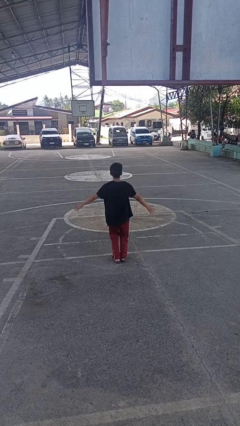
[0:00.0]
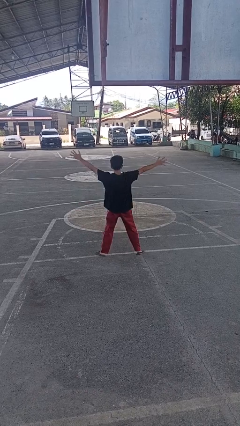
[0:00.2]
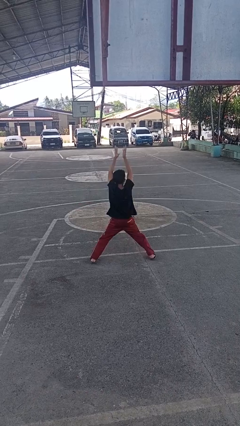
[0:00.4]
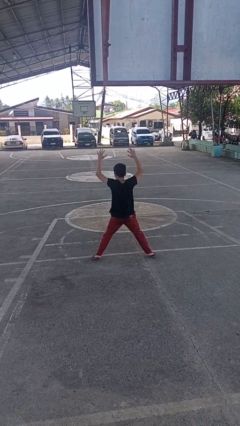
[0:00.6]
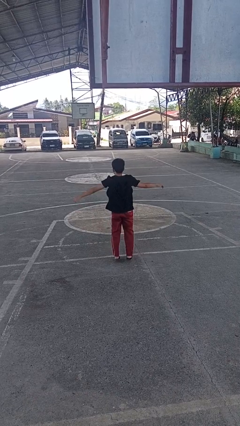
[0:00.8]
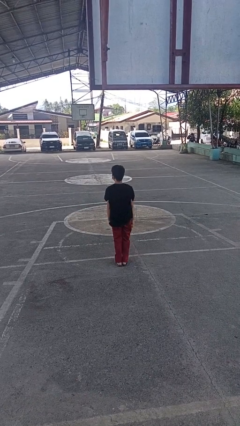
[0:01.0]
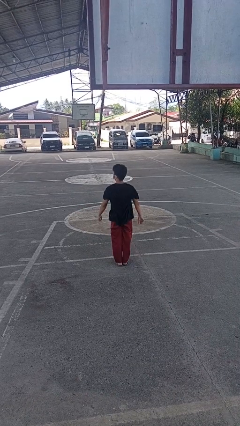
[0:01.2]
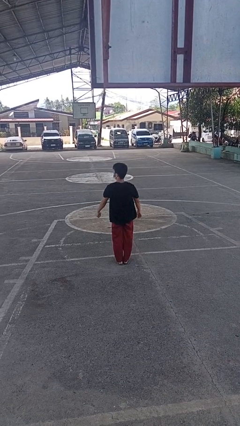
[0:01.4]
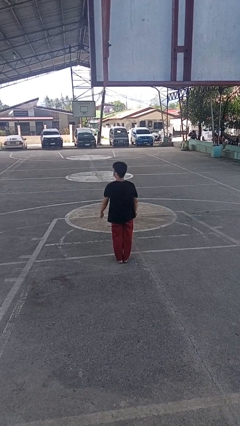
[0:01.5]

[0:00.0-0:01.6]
person exercises with jumping jacks

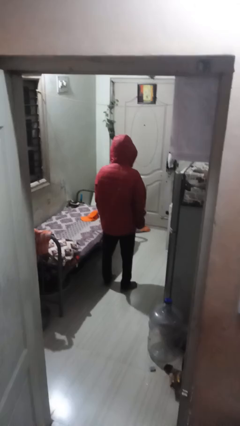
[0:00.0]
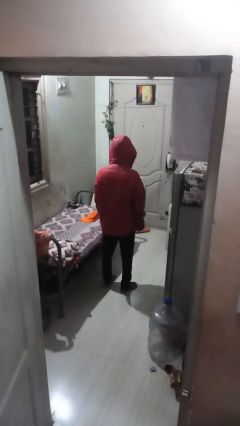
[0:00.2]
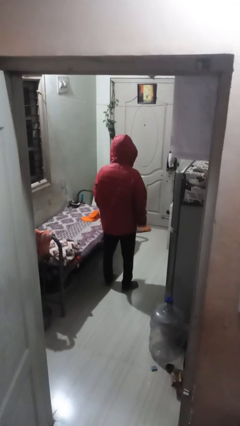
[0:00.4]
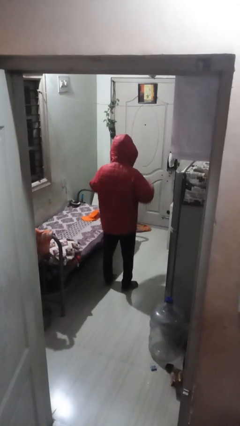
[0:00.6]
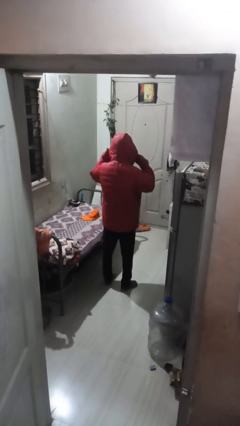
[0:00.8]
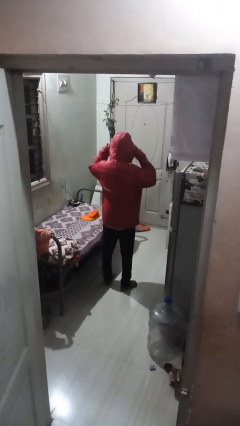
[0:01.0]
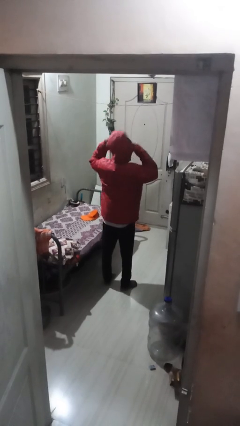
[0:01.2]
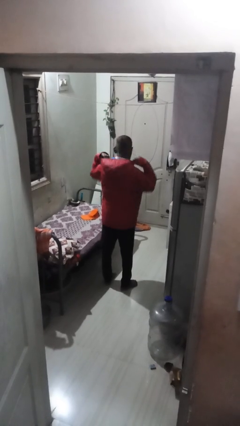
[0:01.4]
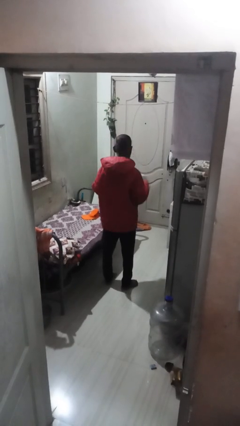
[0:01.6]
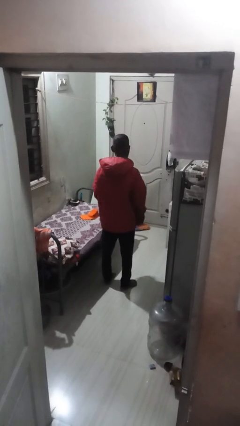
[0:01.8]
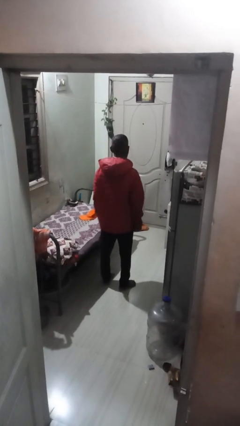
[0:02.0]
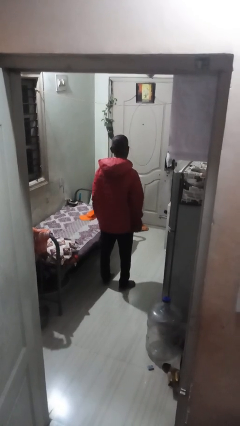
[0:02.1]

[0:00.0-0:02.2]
person takes off hoodie

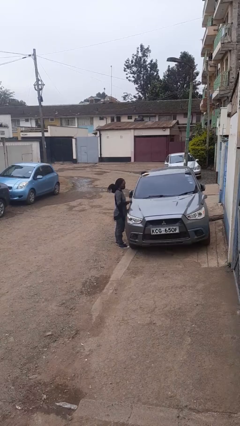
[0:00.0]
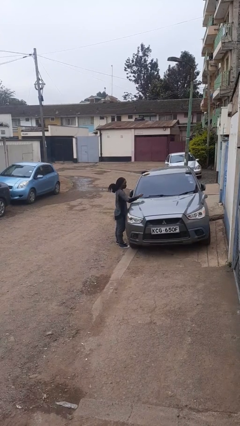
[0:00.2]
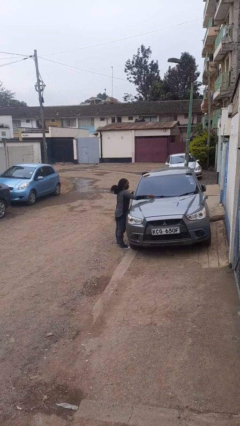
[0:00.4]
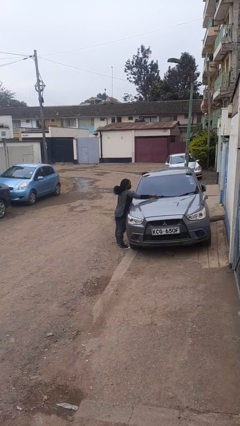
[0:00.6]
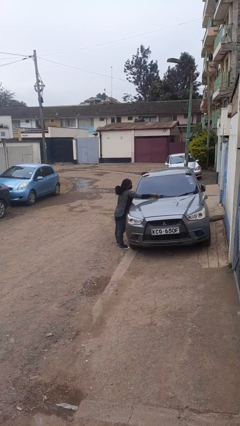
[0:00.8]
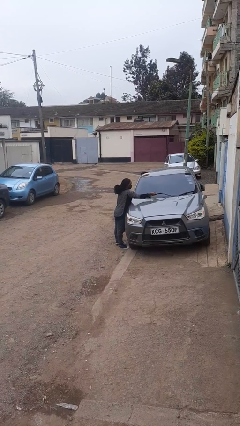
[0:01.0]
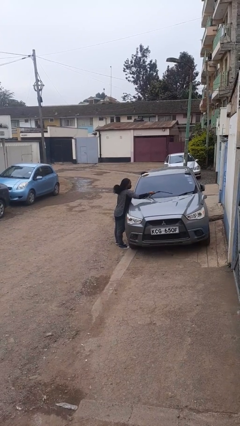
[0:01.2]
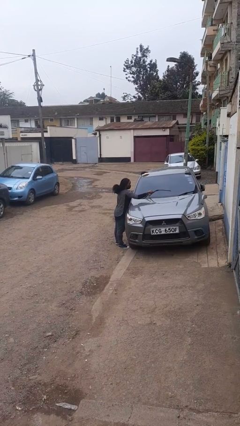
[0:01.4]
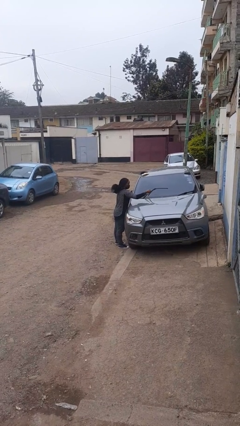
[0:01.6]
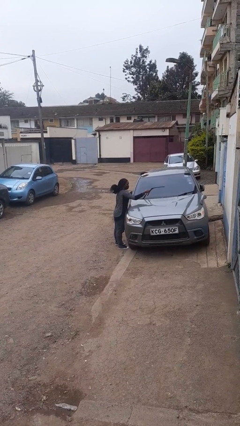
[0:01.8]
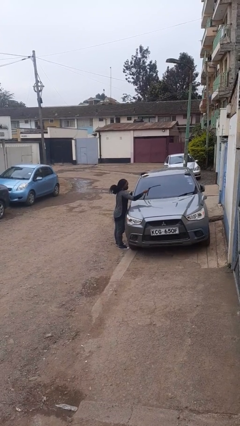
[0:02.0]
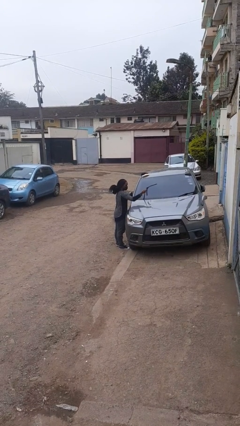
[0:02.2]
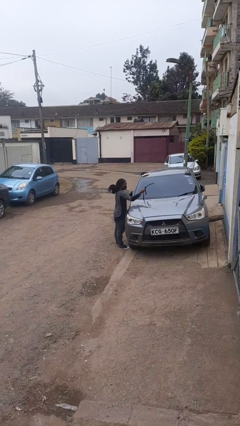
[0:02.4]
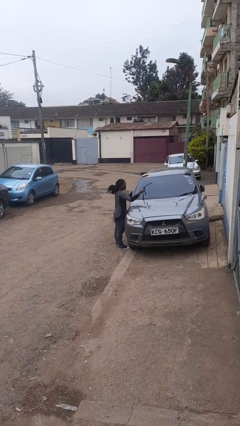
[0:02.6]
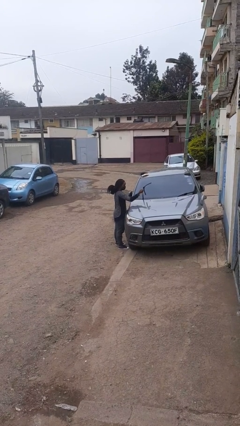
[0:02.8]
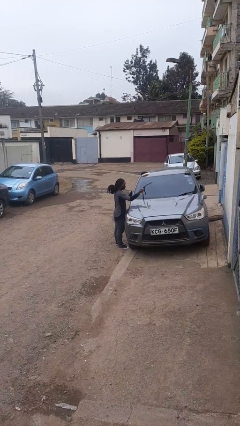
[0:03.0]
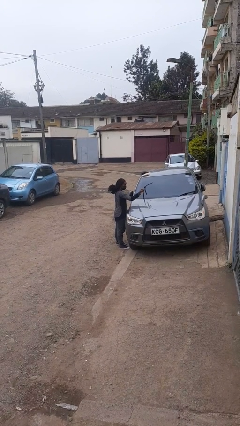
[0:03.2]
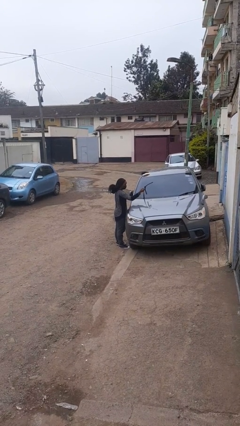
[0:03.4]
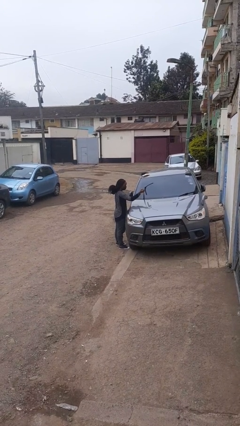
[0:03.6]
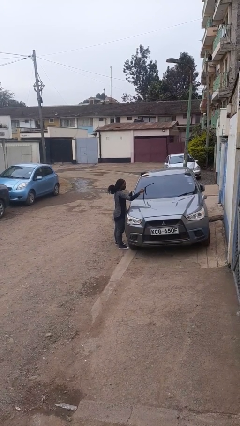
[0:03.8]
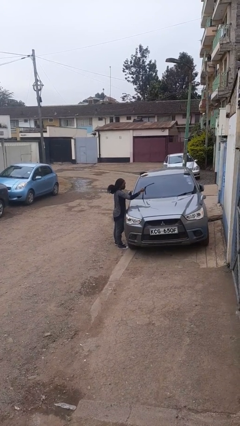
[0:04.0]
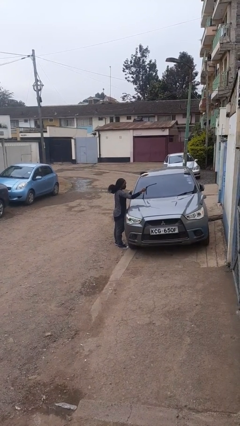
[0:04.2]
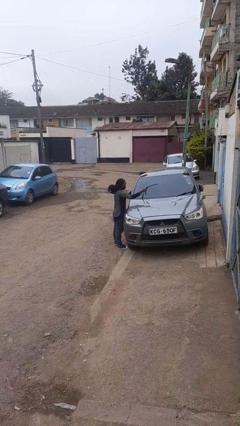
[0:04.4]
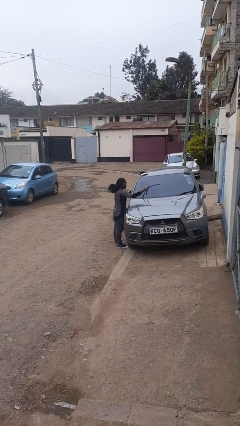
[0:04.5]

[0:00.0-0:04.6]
person flips up car wipers

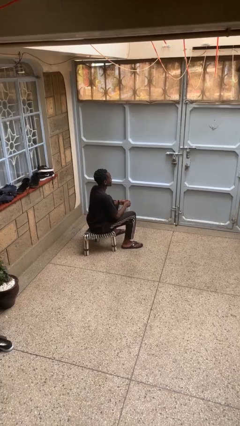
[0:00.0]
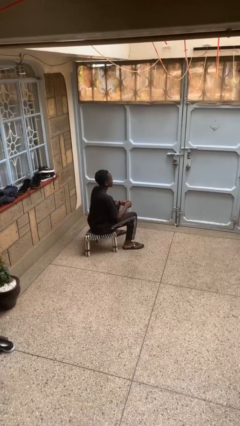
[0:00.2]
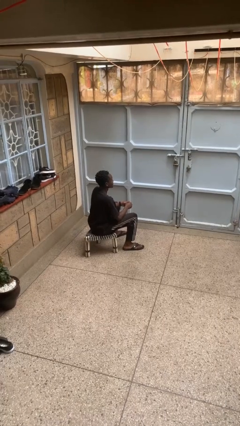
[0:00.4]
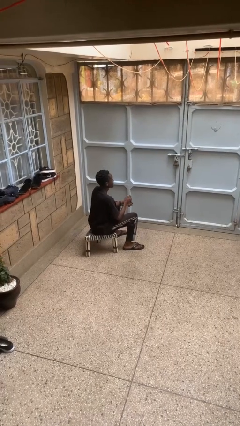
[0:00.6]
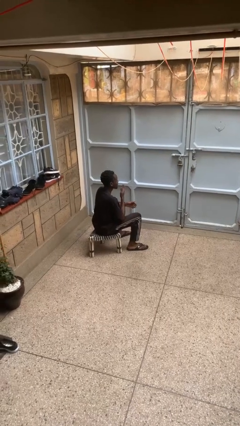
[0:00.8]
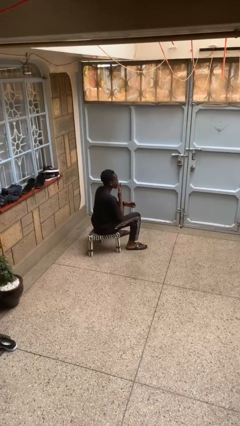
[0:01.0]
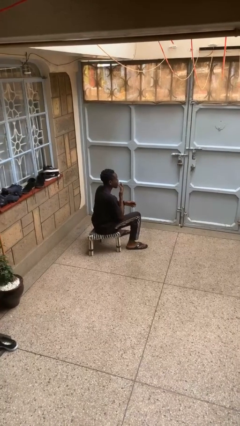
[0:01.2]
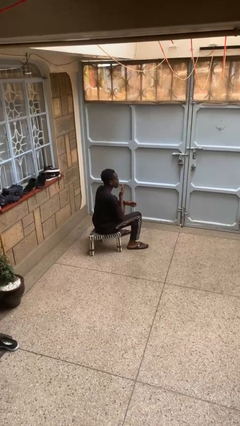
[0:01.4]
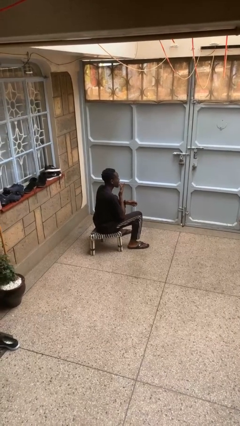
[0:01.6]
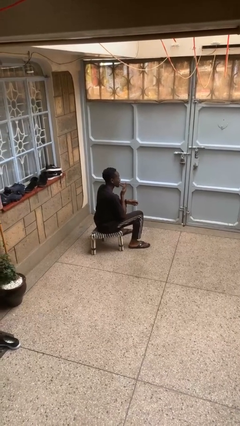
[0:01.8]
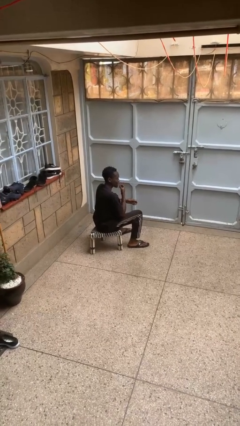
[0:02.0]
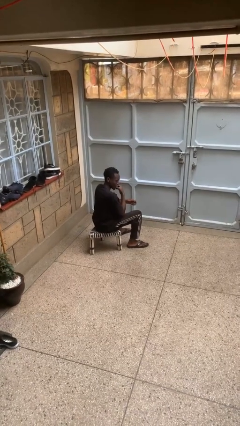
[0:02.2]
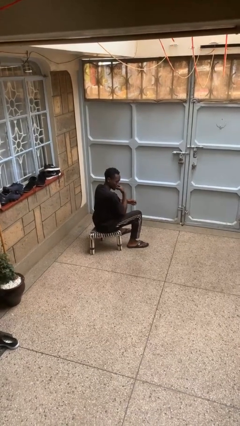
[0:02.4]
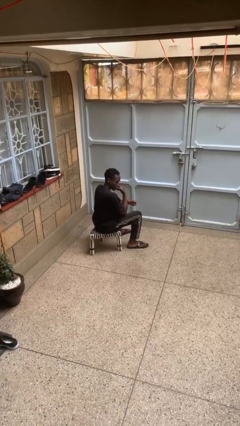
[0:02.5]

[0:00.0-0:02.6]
person licks fingers

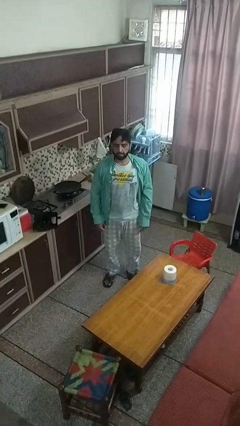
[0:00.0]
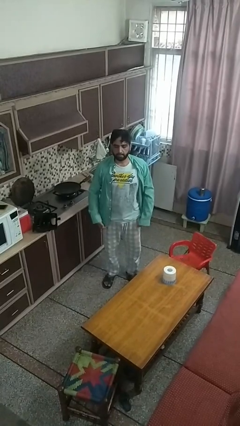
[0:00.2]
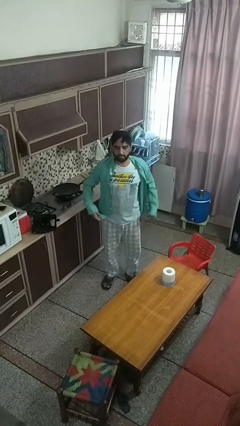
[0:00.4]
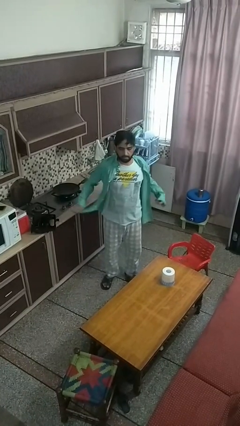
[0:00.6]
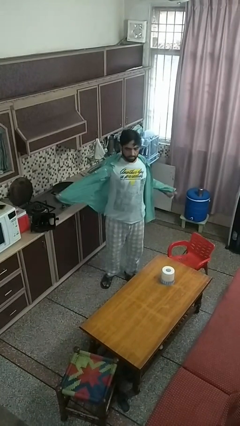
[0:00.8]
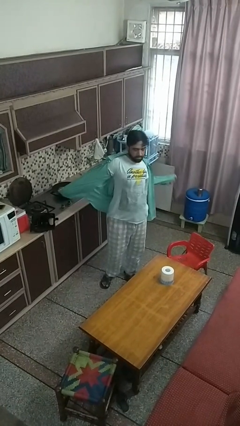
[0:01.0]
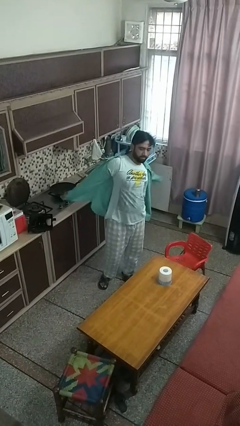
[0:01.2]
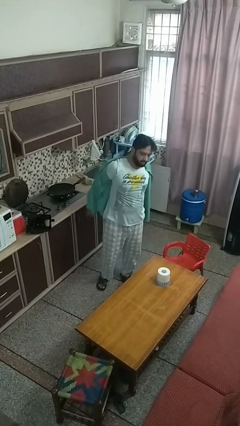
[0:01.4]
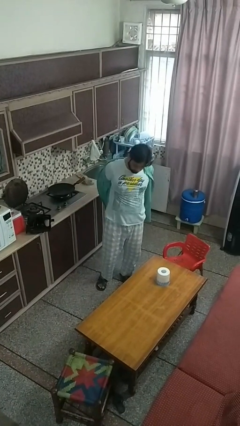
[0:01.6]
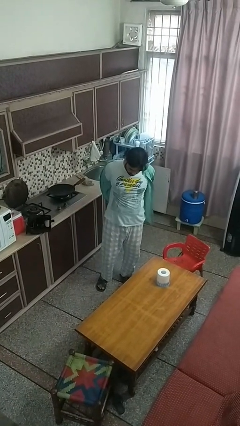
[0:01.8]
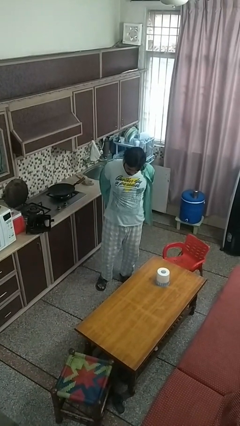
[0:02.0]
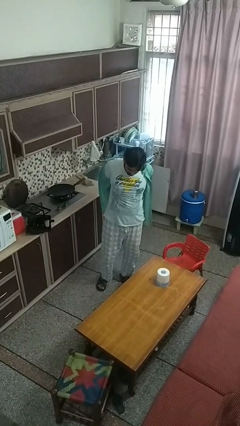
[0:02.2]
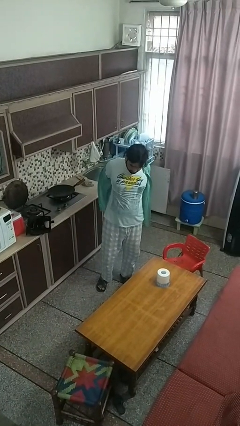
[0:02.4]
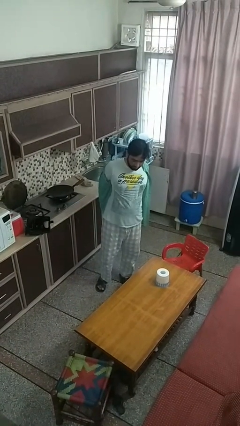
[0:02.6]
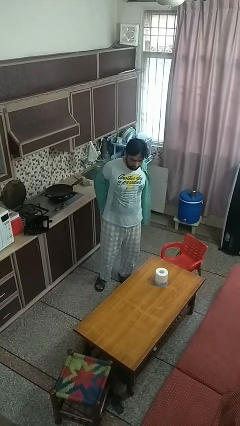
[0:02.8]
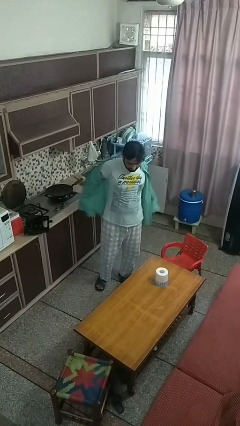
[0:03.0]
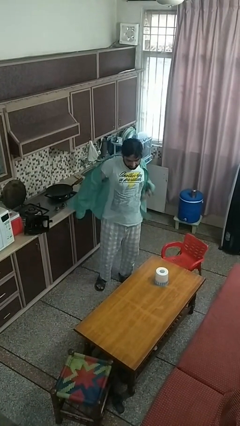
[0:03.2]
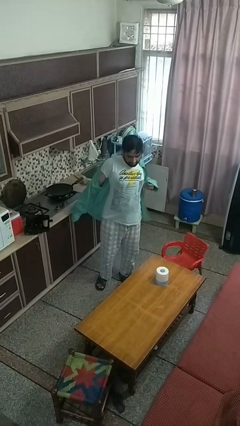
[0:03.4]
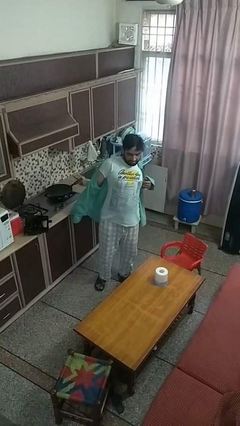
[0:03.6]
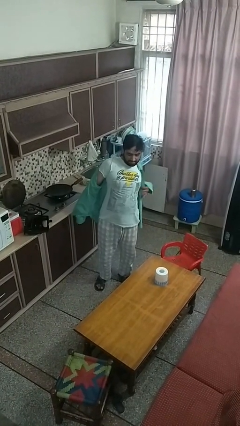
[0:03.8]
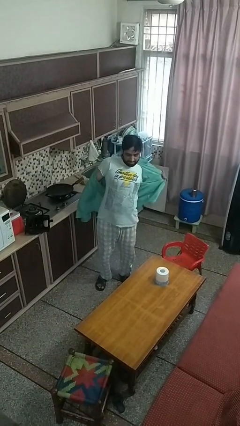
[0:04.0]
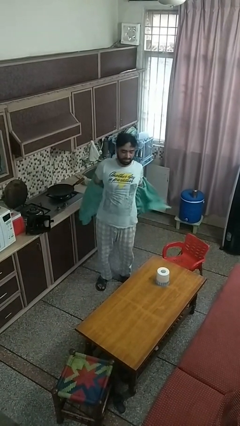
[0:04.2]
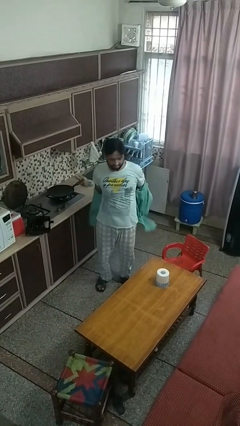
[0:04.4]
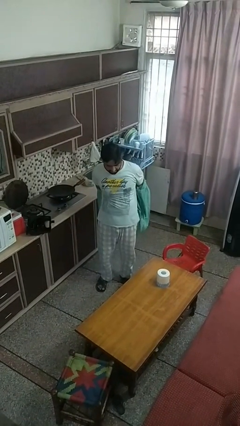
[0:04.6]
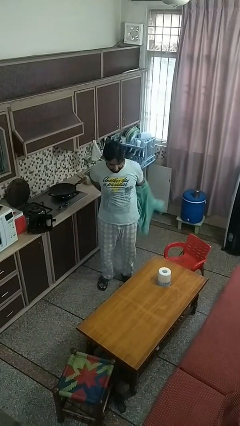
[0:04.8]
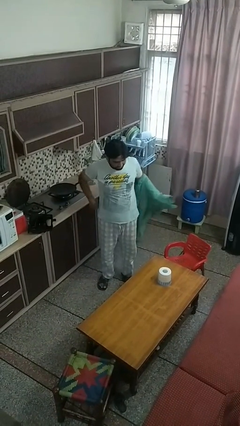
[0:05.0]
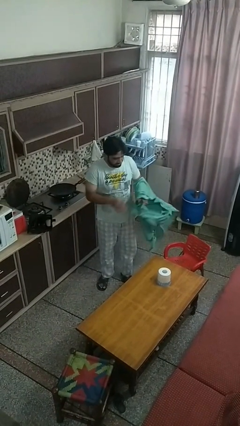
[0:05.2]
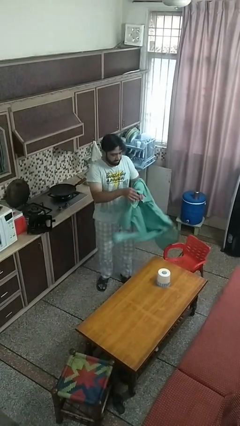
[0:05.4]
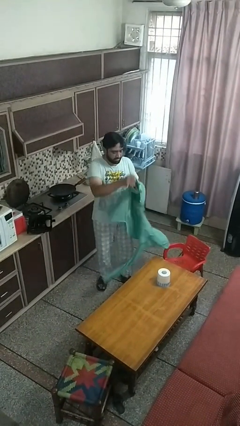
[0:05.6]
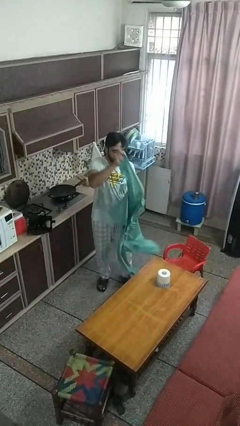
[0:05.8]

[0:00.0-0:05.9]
person takes off shirt

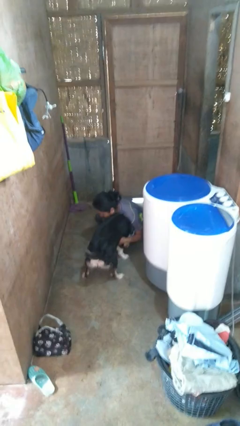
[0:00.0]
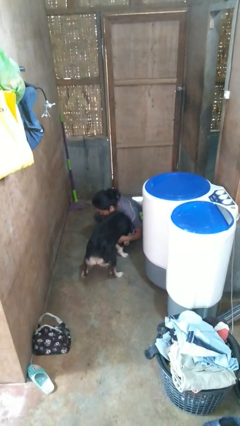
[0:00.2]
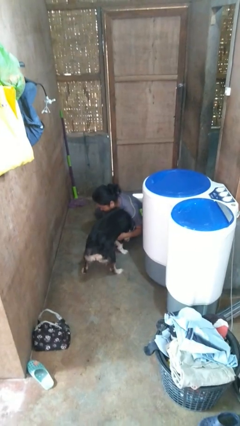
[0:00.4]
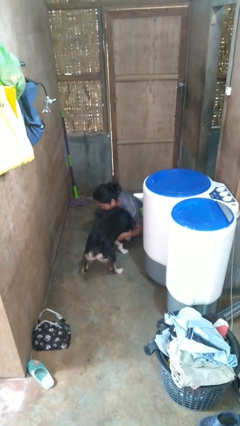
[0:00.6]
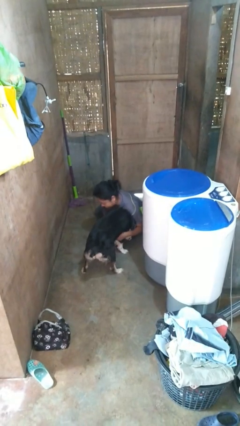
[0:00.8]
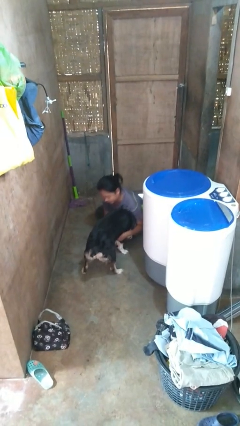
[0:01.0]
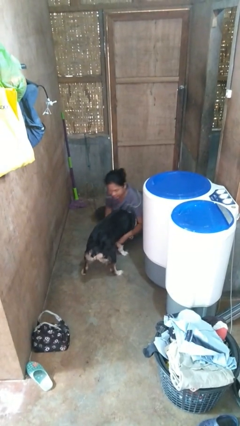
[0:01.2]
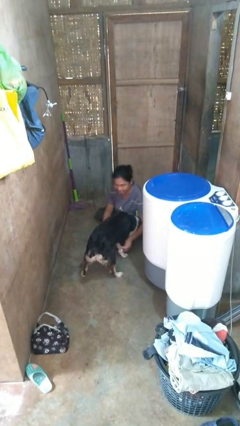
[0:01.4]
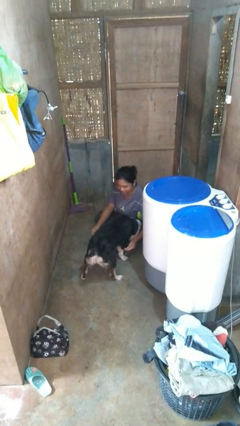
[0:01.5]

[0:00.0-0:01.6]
person hugs dog
